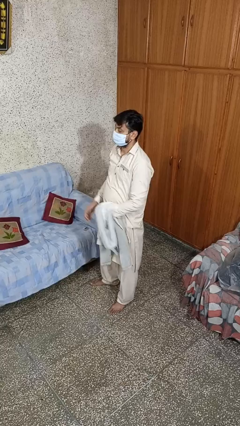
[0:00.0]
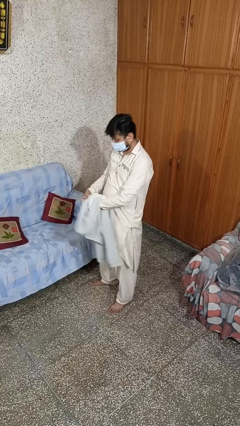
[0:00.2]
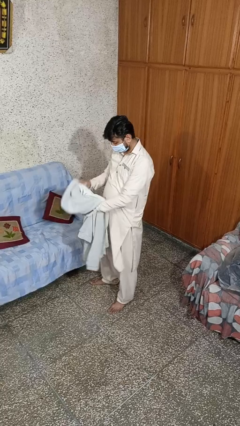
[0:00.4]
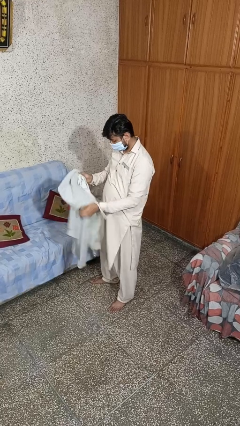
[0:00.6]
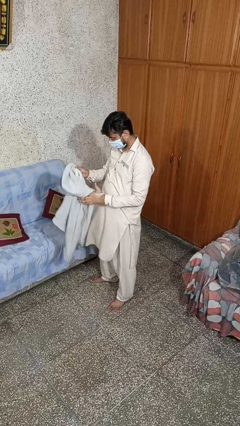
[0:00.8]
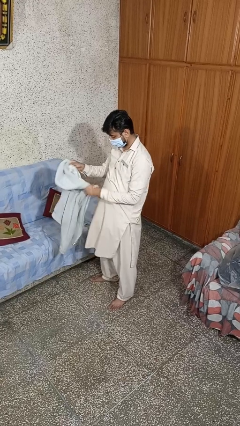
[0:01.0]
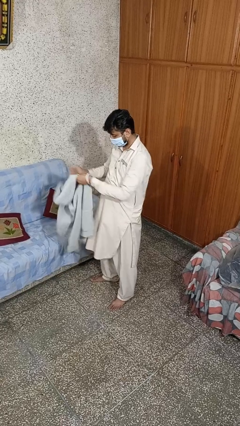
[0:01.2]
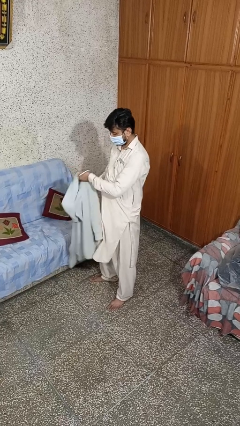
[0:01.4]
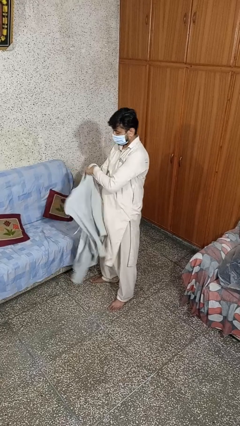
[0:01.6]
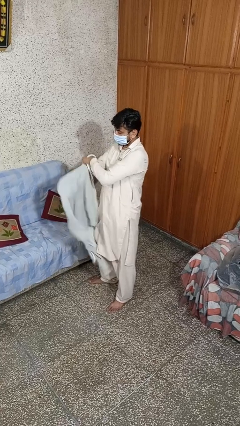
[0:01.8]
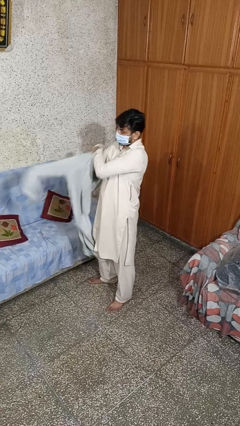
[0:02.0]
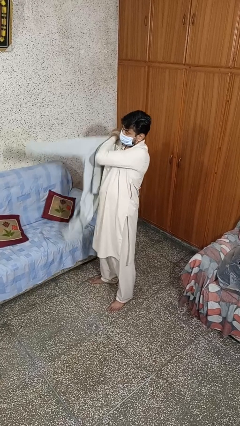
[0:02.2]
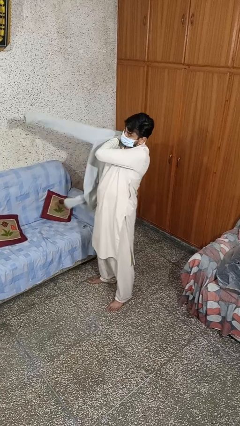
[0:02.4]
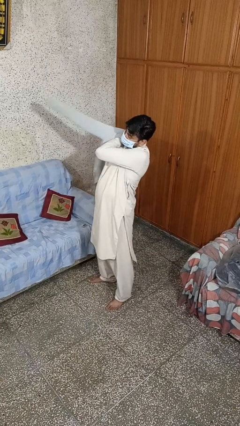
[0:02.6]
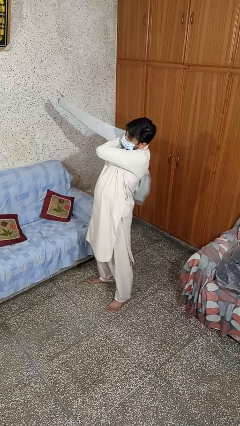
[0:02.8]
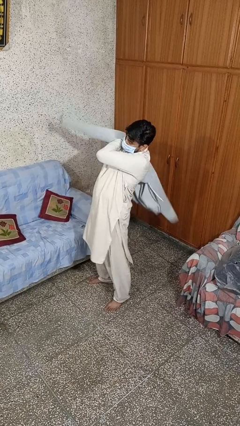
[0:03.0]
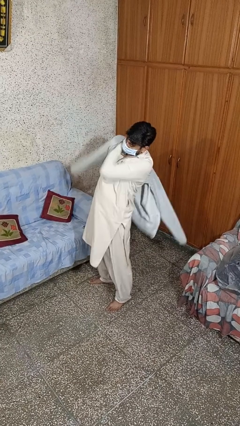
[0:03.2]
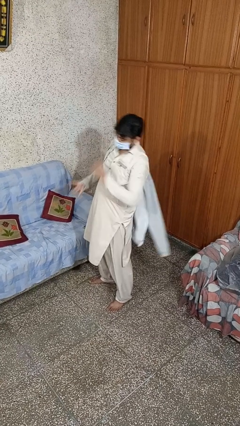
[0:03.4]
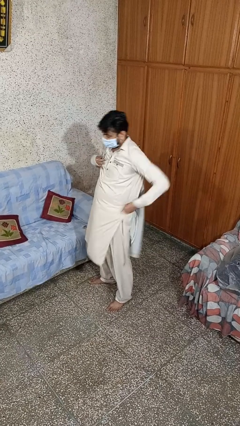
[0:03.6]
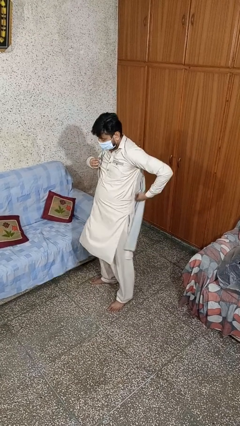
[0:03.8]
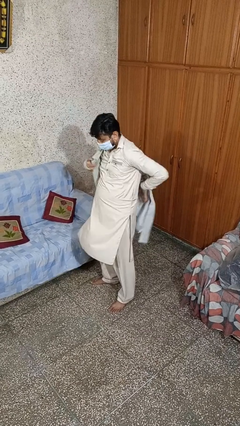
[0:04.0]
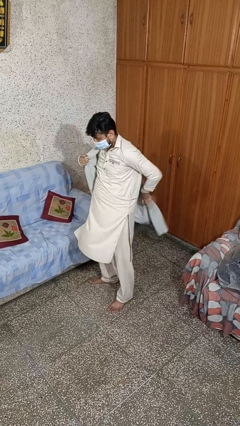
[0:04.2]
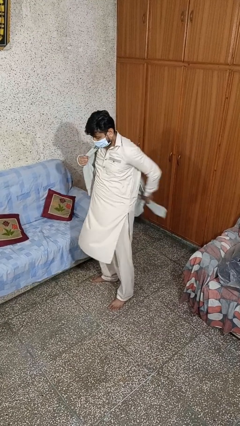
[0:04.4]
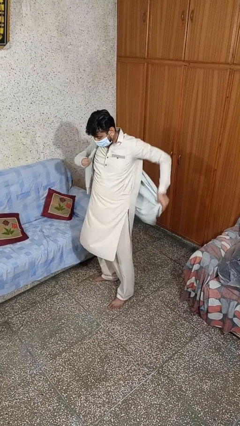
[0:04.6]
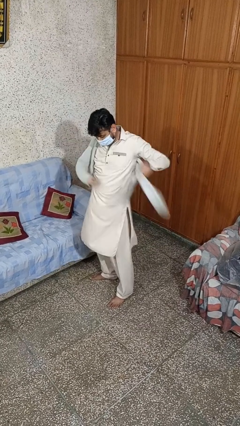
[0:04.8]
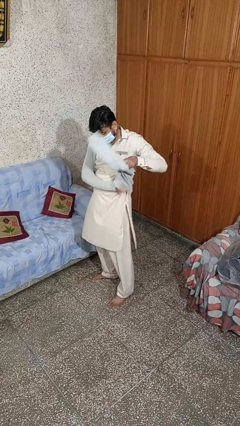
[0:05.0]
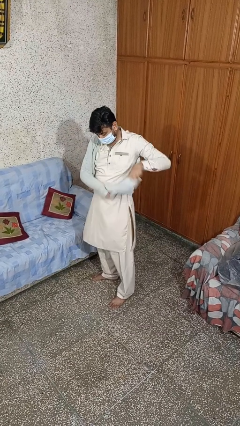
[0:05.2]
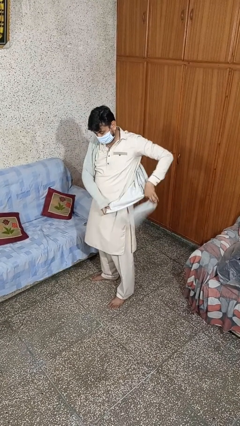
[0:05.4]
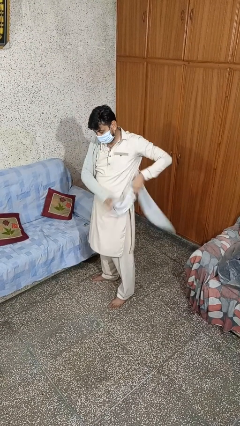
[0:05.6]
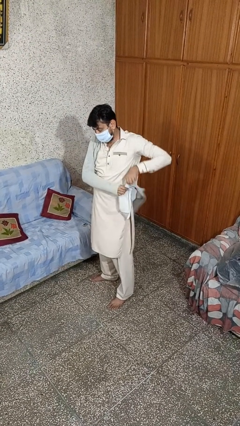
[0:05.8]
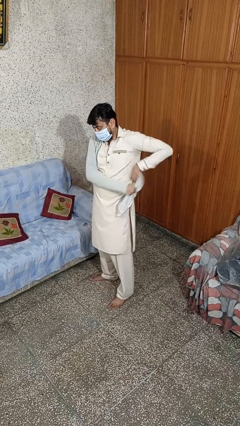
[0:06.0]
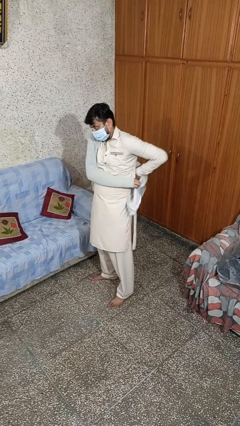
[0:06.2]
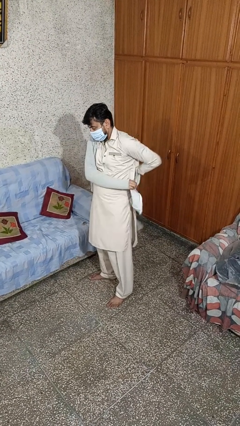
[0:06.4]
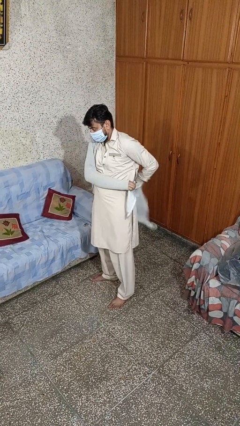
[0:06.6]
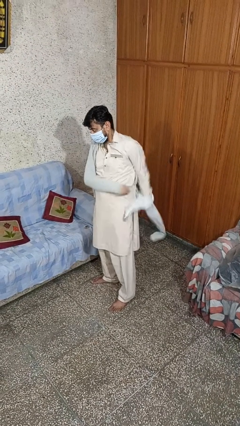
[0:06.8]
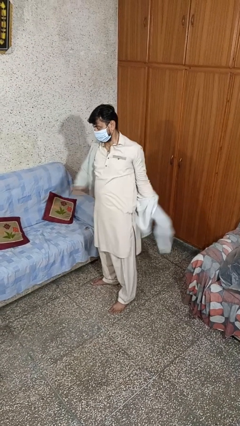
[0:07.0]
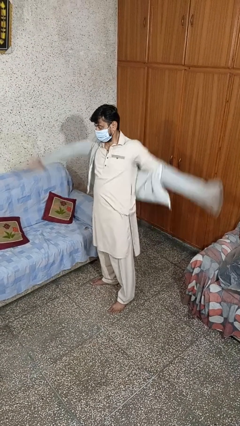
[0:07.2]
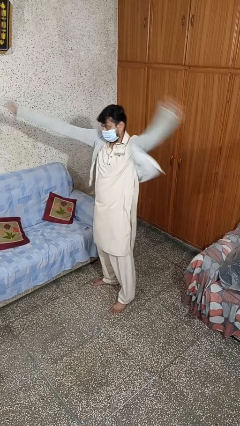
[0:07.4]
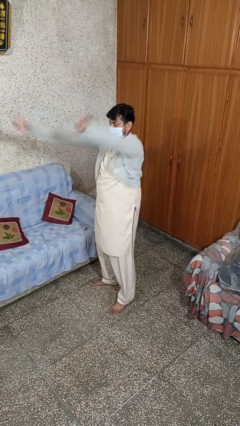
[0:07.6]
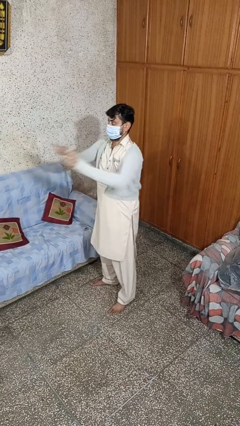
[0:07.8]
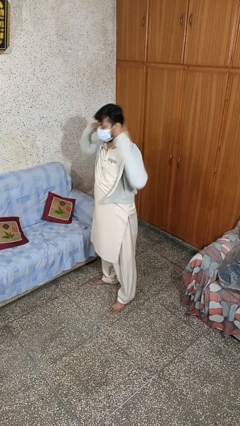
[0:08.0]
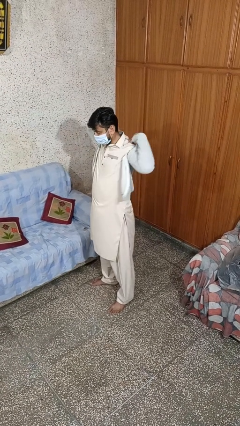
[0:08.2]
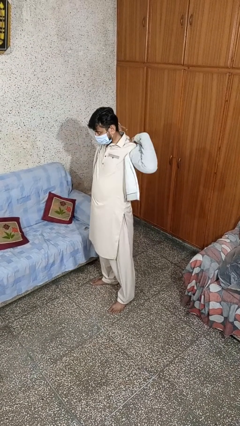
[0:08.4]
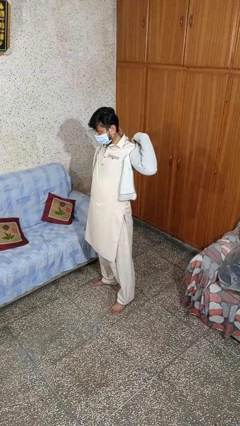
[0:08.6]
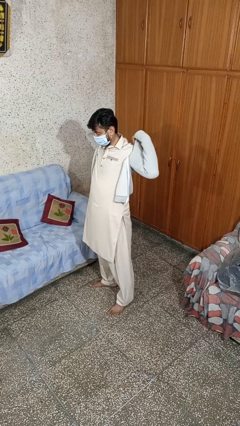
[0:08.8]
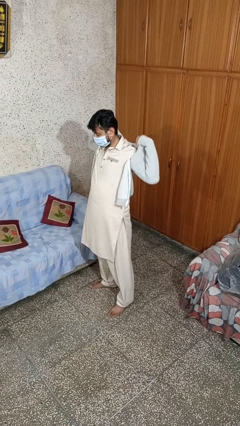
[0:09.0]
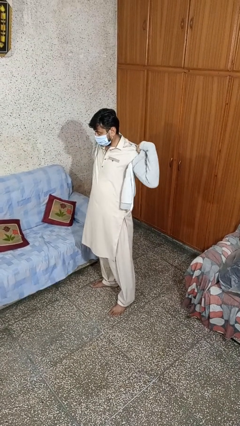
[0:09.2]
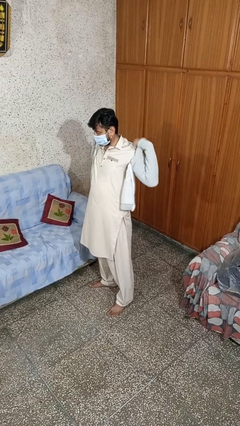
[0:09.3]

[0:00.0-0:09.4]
person puts on hoodie

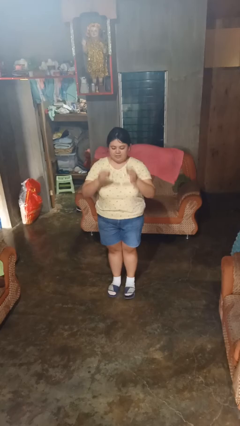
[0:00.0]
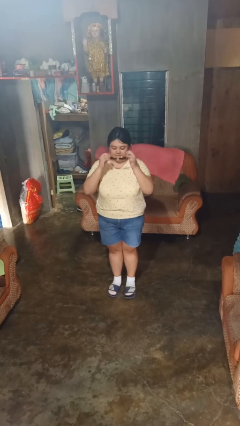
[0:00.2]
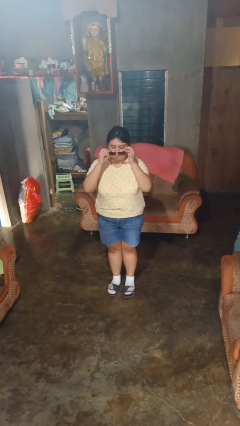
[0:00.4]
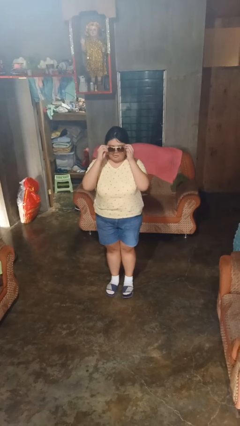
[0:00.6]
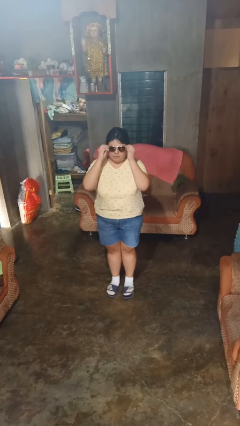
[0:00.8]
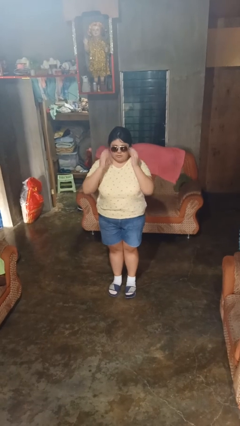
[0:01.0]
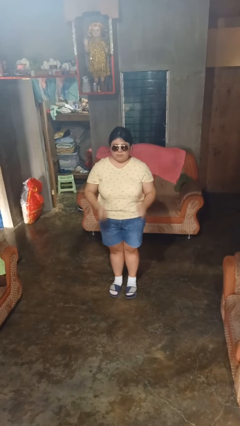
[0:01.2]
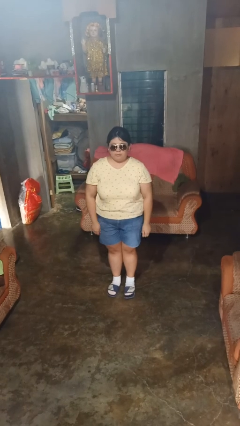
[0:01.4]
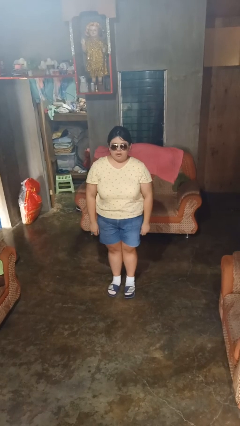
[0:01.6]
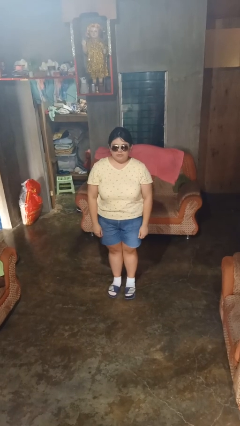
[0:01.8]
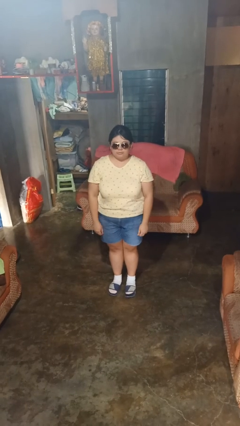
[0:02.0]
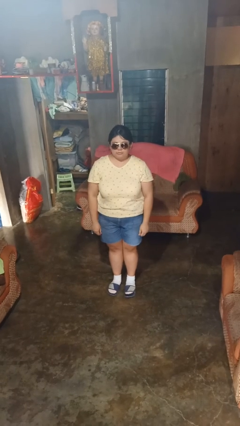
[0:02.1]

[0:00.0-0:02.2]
person puts on sunglasses

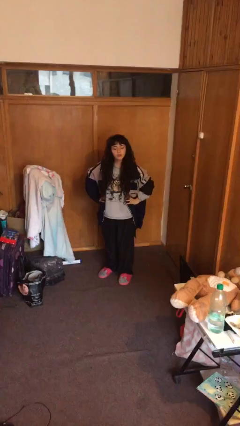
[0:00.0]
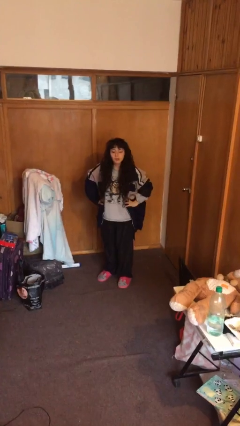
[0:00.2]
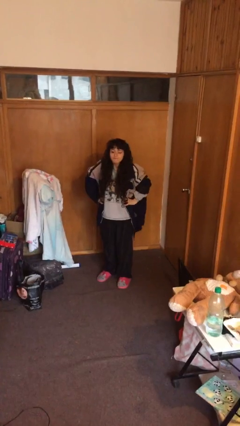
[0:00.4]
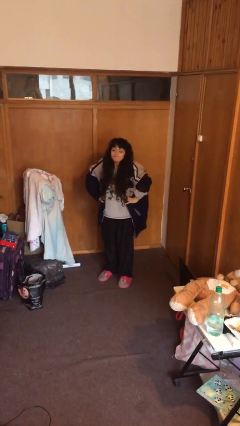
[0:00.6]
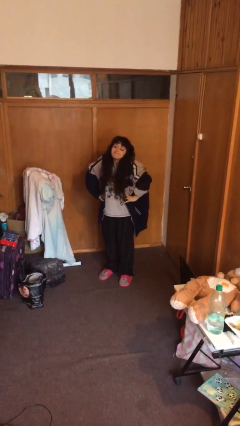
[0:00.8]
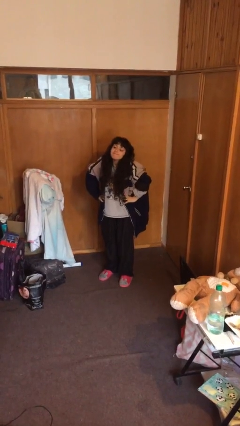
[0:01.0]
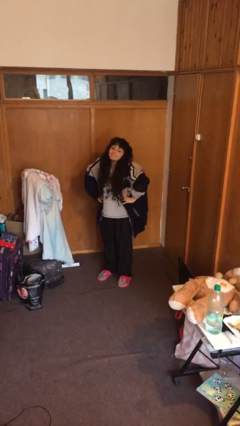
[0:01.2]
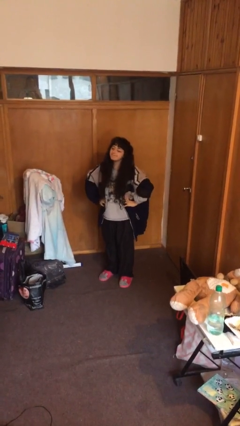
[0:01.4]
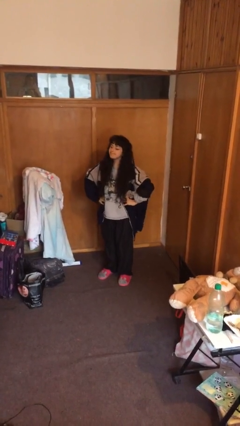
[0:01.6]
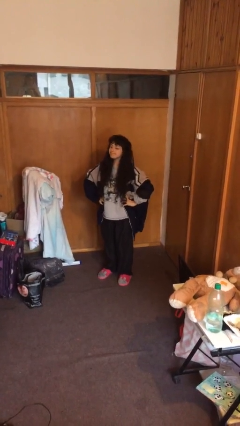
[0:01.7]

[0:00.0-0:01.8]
person shrugs

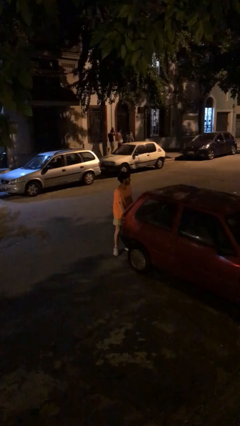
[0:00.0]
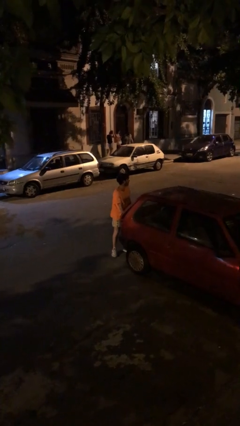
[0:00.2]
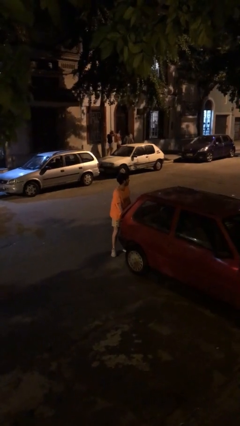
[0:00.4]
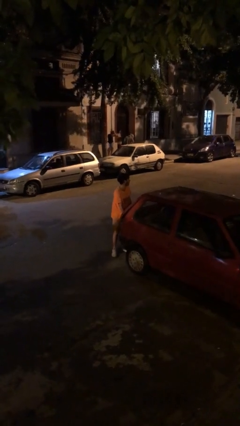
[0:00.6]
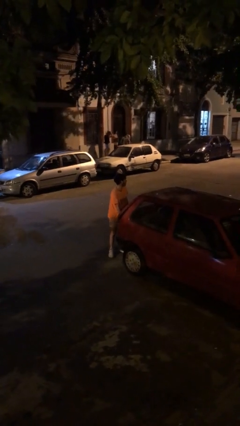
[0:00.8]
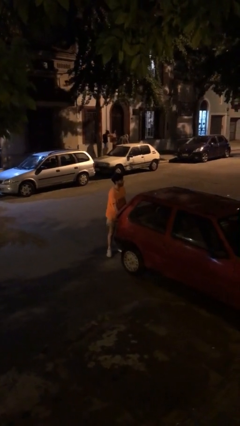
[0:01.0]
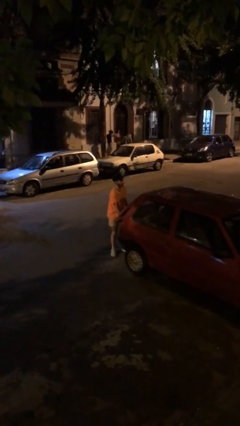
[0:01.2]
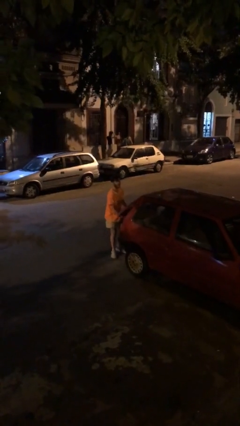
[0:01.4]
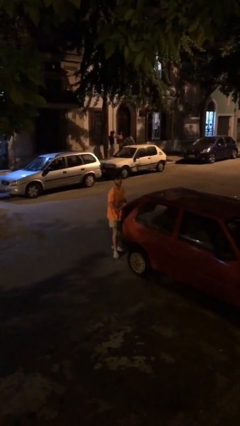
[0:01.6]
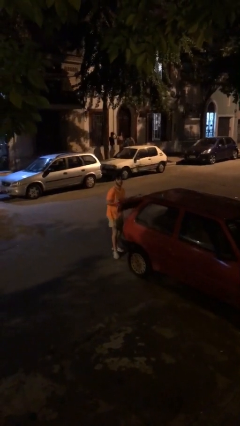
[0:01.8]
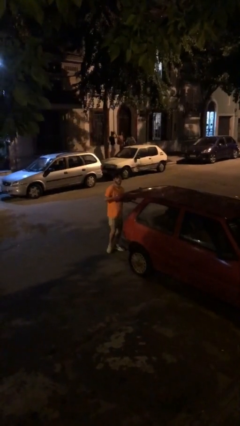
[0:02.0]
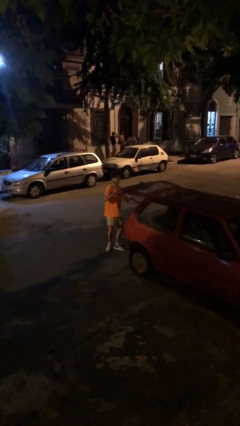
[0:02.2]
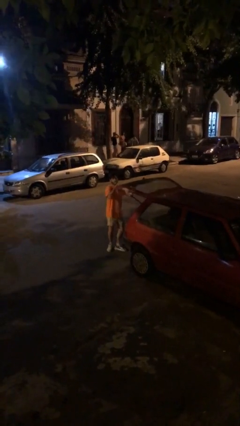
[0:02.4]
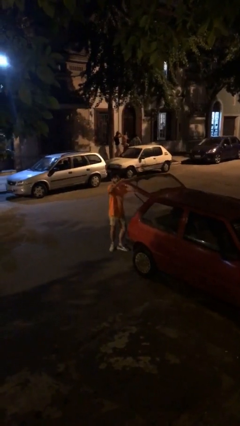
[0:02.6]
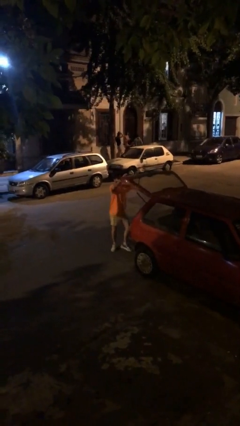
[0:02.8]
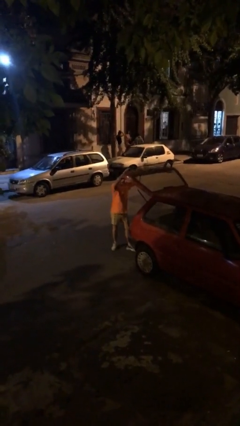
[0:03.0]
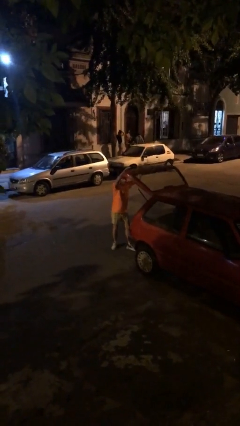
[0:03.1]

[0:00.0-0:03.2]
person opens car trunk

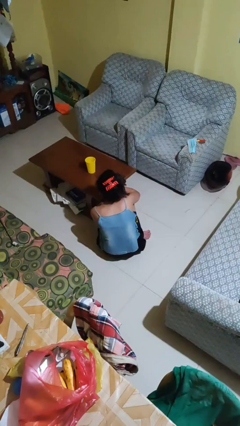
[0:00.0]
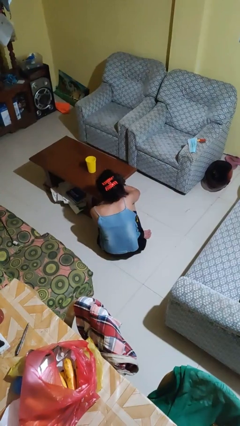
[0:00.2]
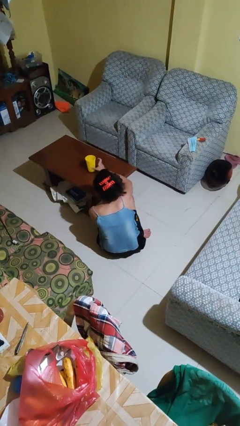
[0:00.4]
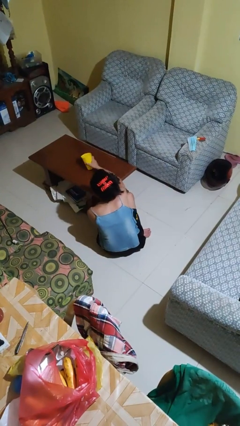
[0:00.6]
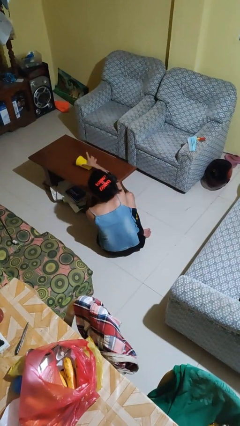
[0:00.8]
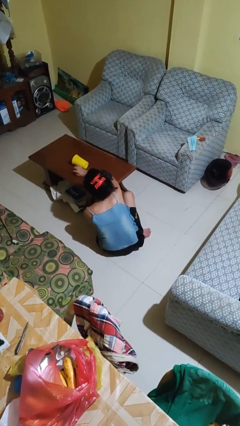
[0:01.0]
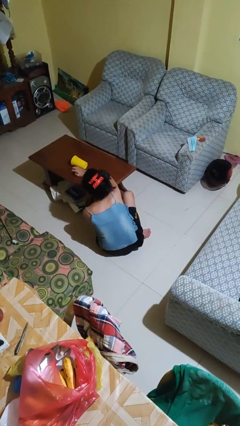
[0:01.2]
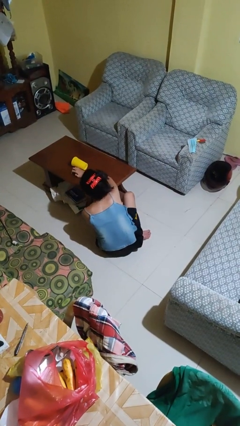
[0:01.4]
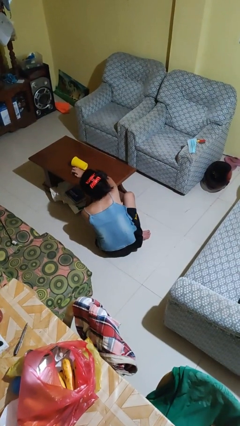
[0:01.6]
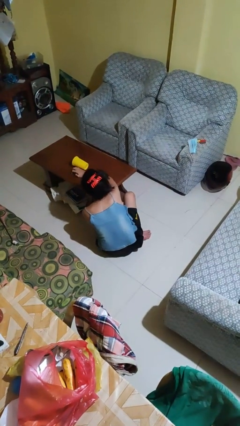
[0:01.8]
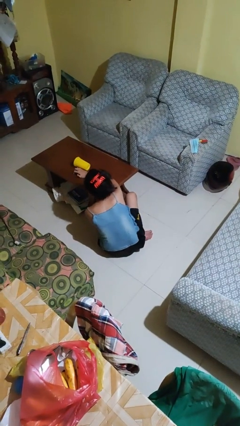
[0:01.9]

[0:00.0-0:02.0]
person knocks over glass
